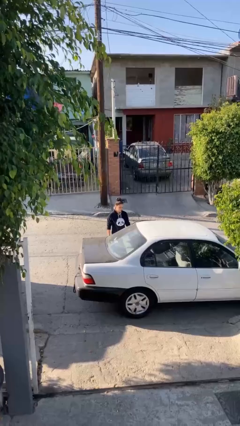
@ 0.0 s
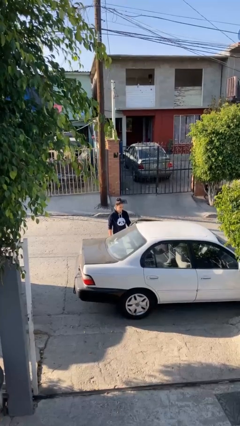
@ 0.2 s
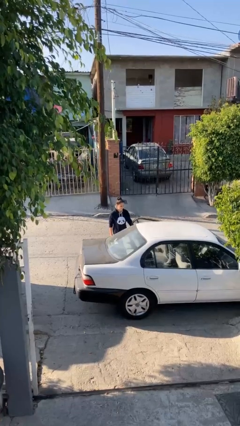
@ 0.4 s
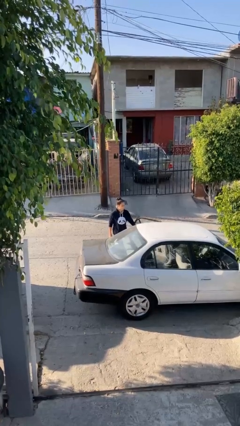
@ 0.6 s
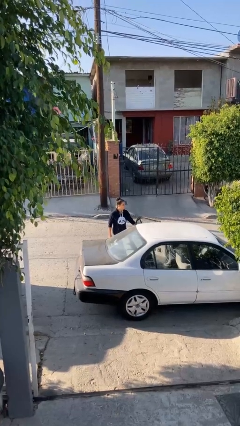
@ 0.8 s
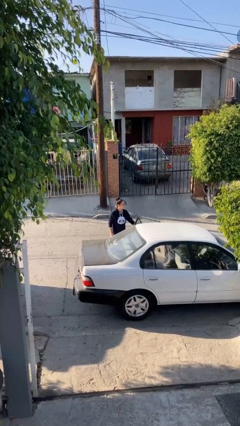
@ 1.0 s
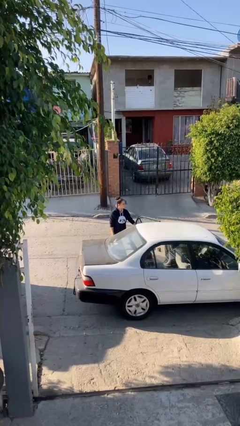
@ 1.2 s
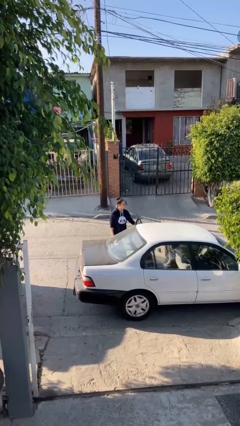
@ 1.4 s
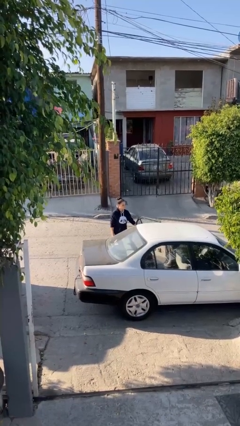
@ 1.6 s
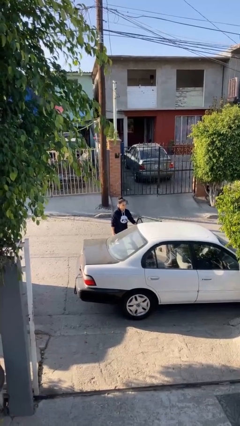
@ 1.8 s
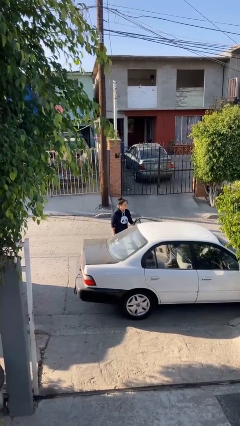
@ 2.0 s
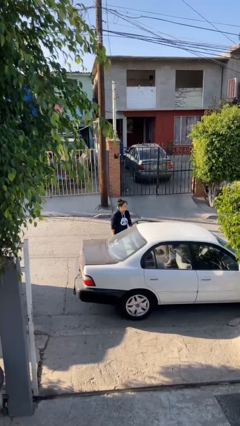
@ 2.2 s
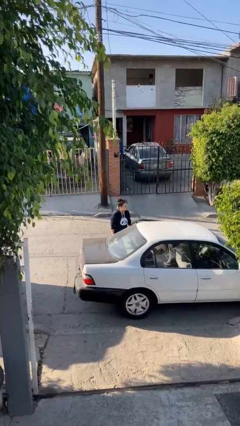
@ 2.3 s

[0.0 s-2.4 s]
person opens car door

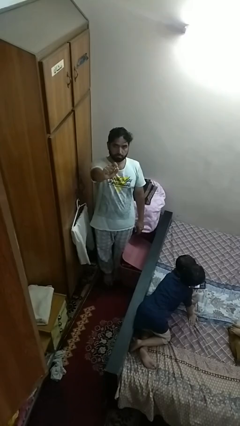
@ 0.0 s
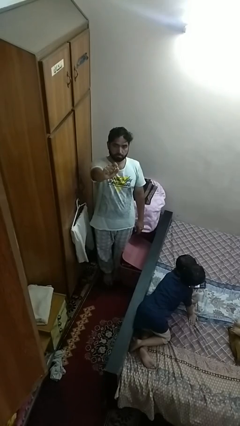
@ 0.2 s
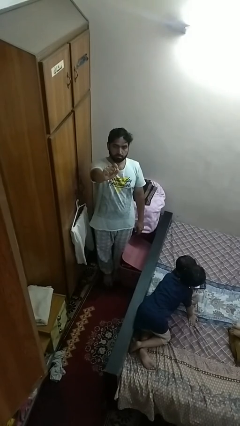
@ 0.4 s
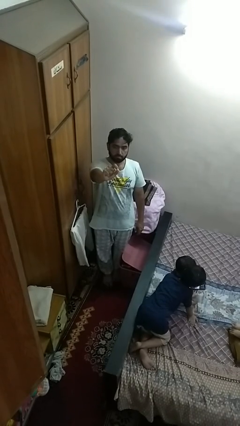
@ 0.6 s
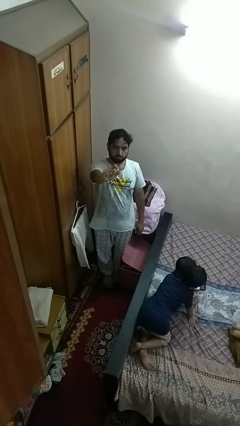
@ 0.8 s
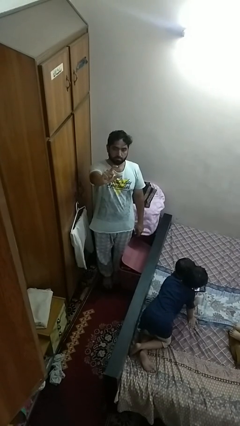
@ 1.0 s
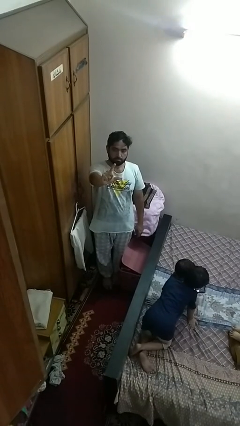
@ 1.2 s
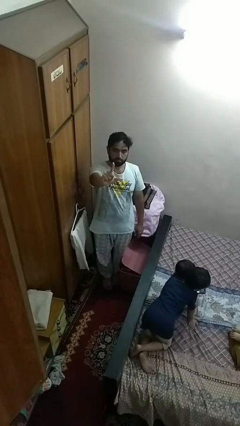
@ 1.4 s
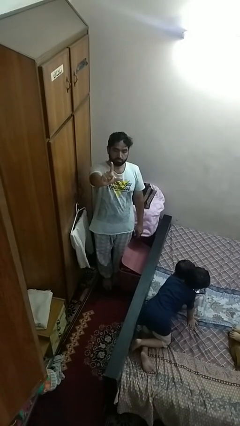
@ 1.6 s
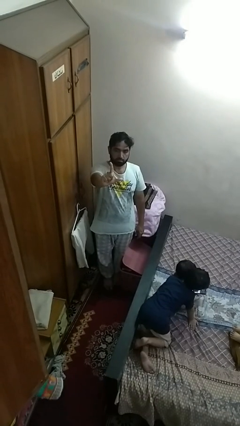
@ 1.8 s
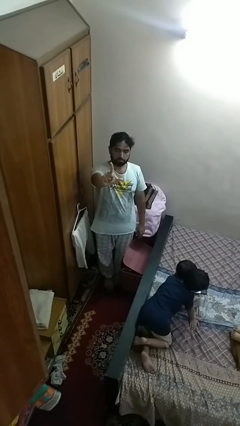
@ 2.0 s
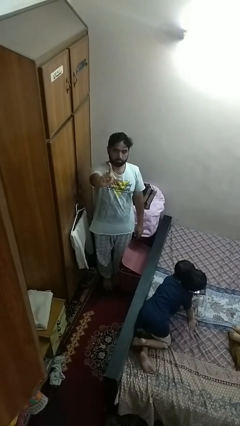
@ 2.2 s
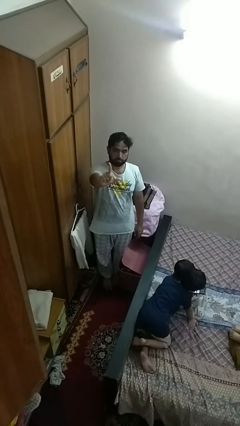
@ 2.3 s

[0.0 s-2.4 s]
person gestures zoom out

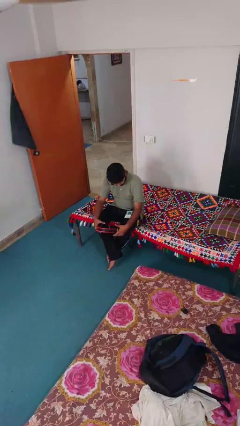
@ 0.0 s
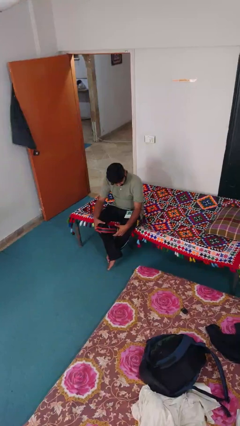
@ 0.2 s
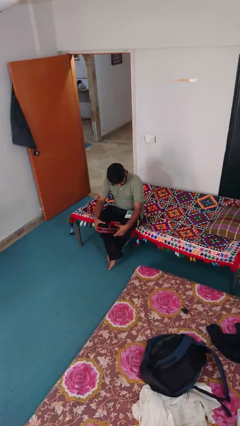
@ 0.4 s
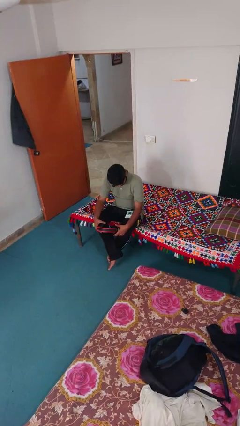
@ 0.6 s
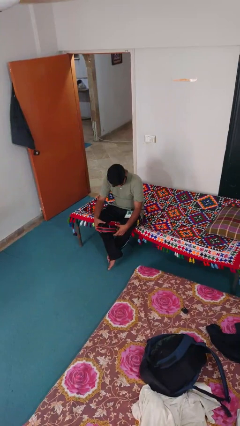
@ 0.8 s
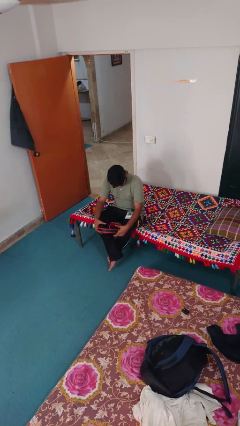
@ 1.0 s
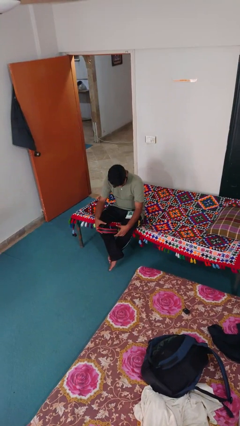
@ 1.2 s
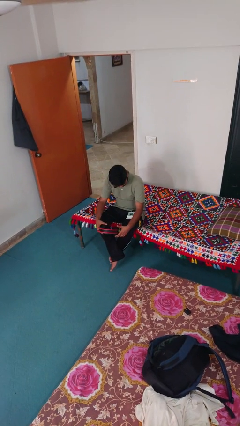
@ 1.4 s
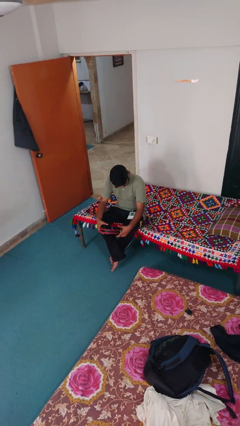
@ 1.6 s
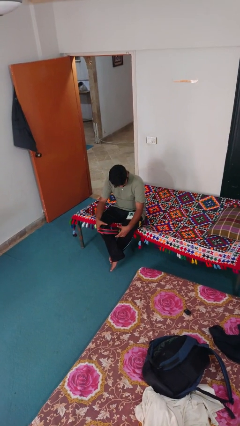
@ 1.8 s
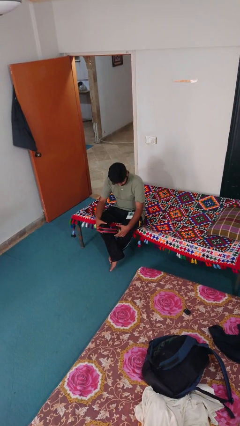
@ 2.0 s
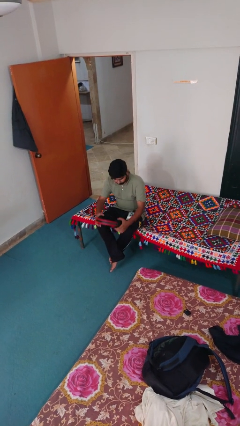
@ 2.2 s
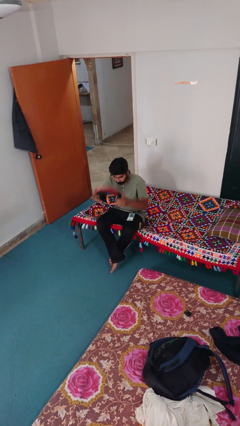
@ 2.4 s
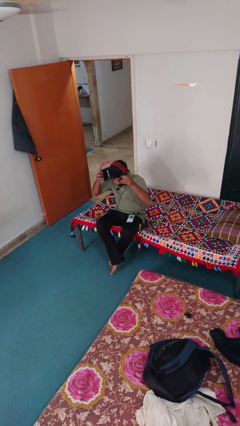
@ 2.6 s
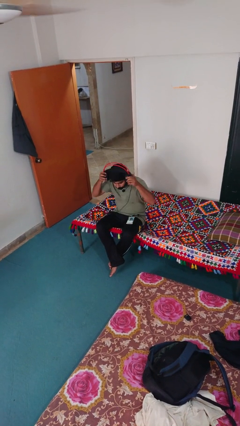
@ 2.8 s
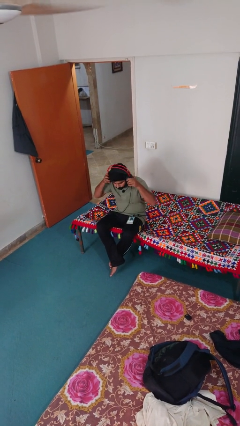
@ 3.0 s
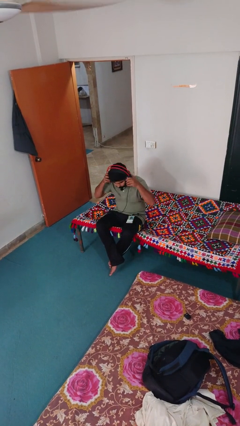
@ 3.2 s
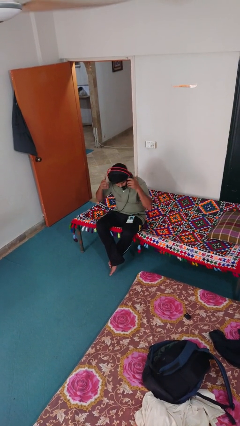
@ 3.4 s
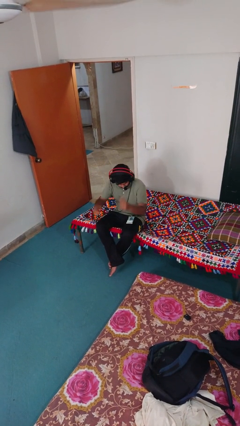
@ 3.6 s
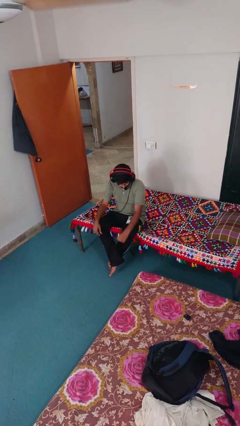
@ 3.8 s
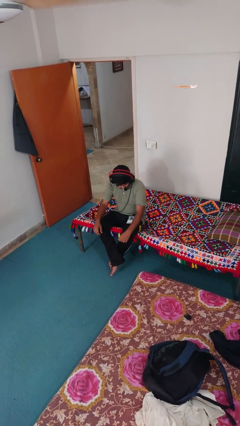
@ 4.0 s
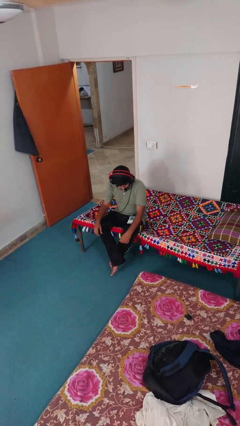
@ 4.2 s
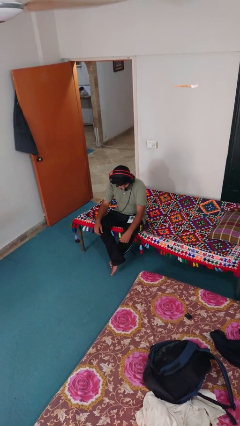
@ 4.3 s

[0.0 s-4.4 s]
person puts on headphones

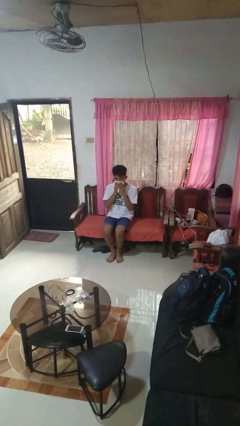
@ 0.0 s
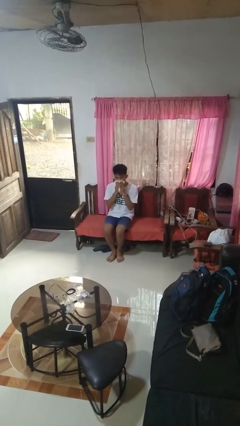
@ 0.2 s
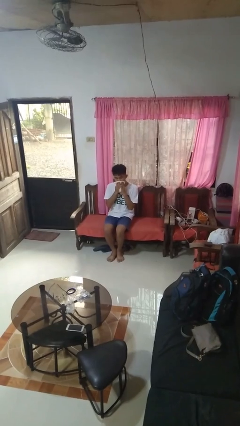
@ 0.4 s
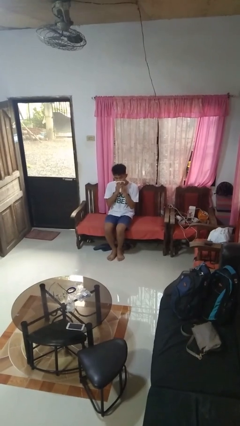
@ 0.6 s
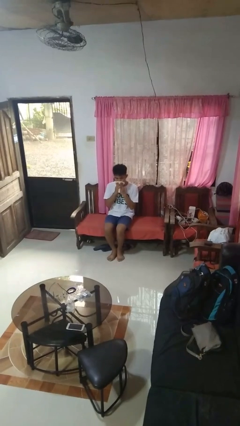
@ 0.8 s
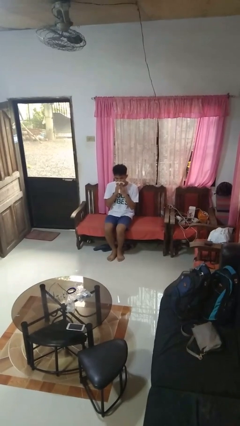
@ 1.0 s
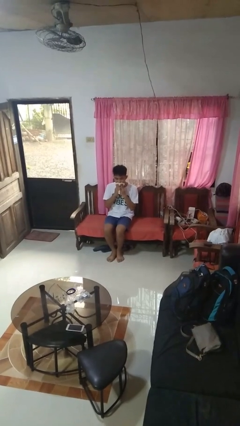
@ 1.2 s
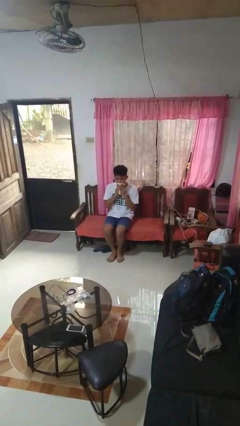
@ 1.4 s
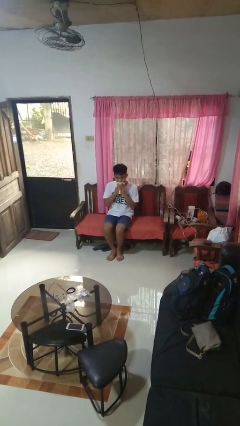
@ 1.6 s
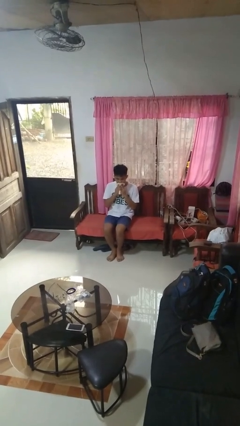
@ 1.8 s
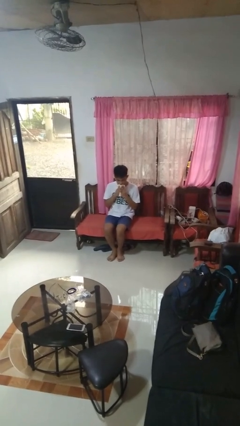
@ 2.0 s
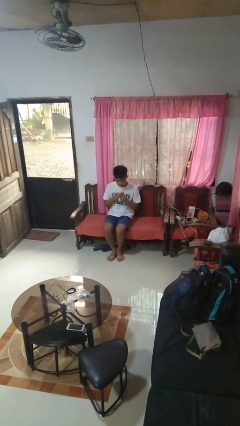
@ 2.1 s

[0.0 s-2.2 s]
person wipes mouth with napkin

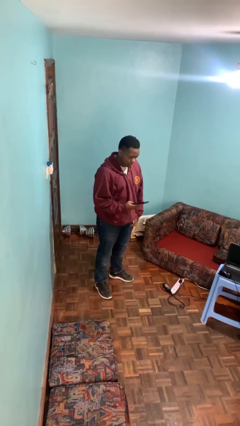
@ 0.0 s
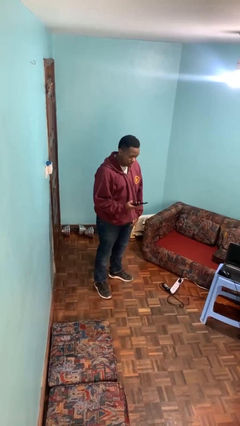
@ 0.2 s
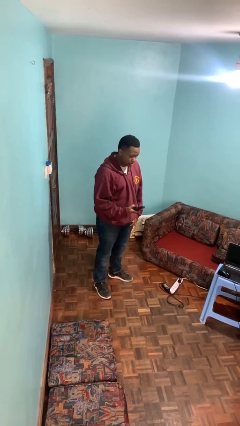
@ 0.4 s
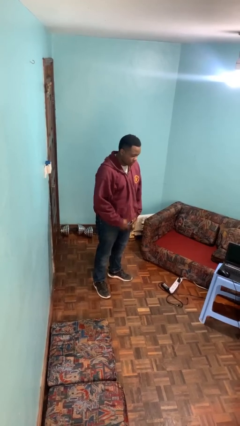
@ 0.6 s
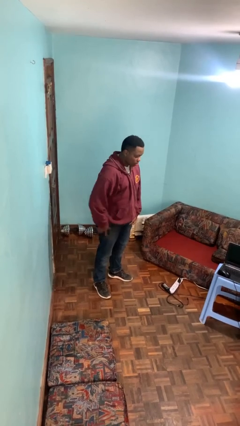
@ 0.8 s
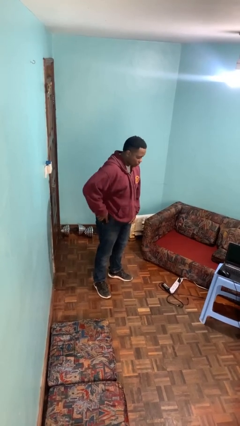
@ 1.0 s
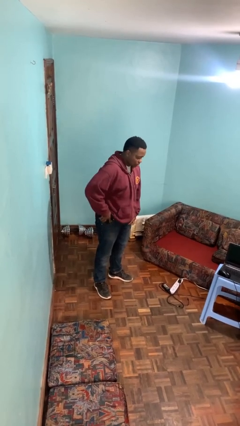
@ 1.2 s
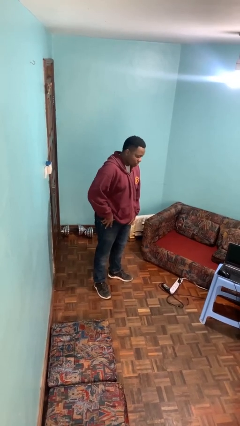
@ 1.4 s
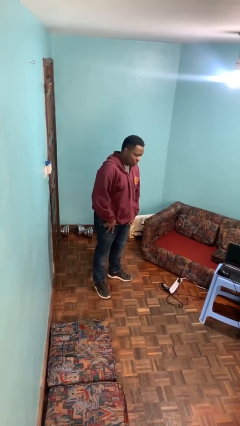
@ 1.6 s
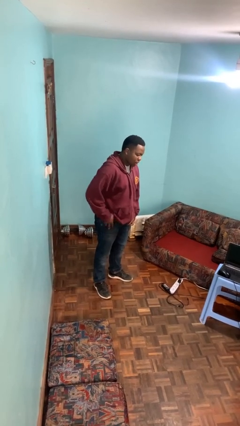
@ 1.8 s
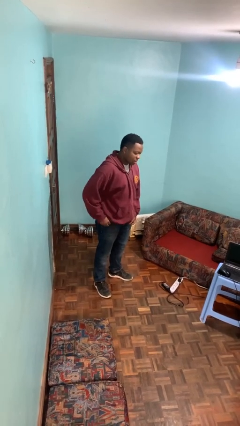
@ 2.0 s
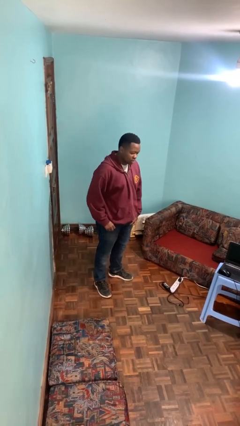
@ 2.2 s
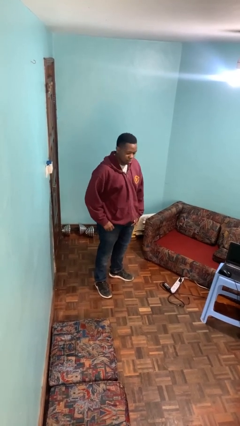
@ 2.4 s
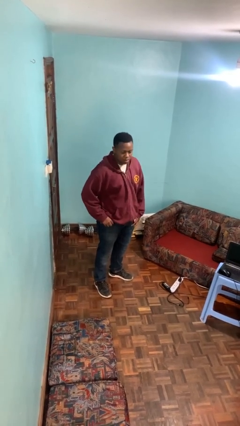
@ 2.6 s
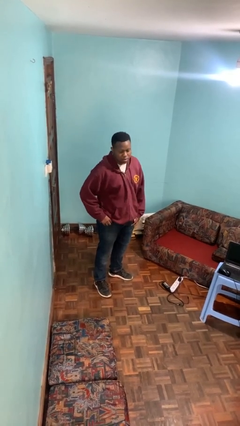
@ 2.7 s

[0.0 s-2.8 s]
person puts phone into pocket

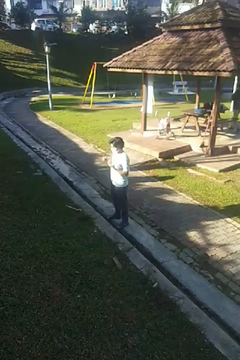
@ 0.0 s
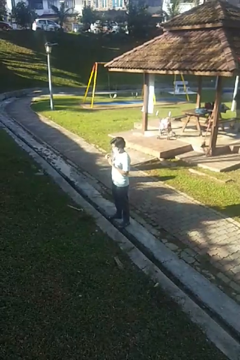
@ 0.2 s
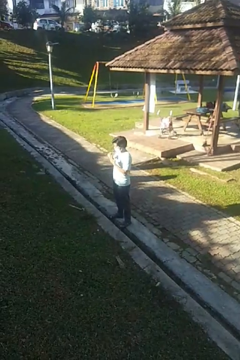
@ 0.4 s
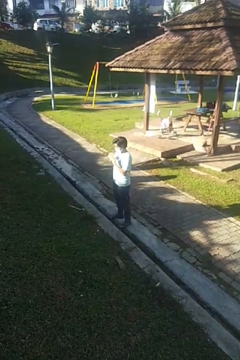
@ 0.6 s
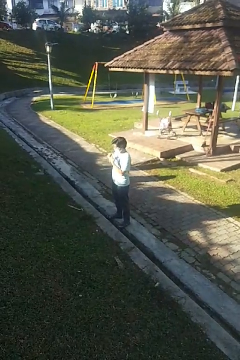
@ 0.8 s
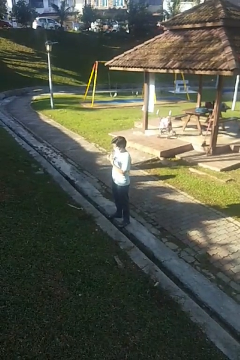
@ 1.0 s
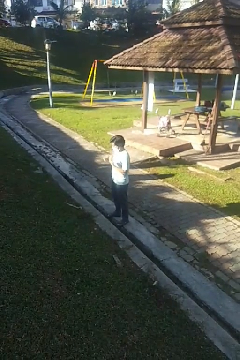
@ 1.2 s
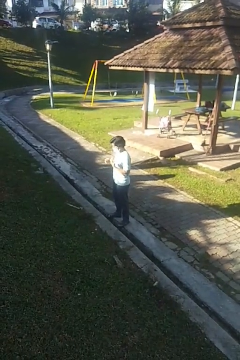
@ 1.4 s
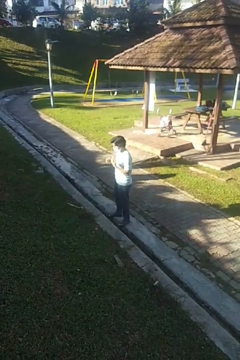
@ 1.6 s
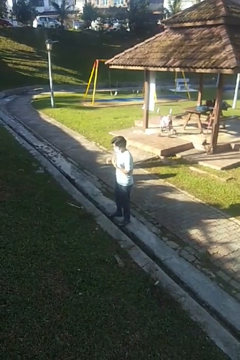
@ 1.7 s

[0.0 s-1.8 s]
person puts on ring

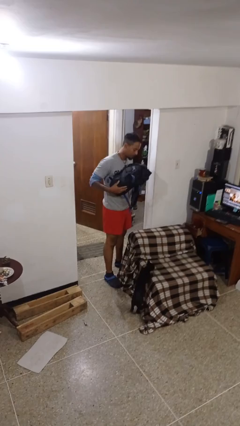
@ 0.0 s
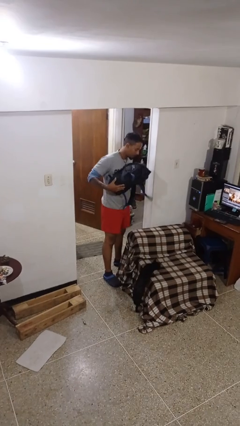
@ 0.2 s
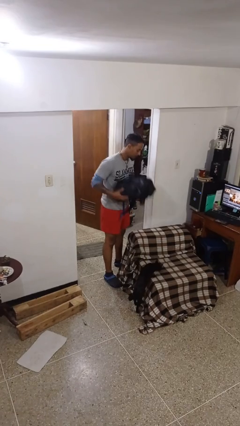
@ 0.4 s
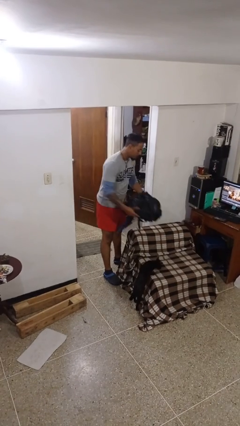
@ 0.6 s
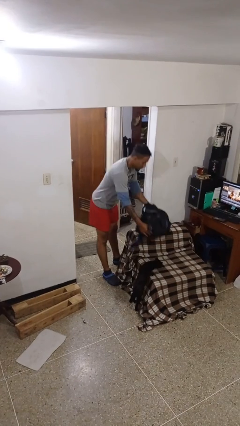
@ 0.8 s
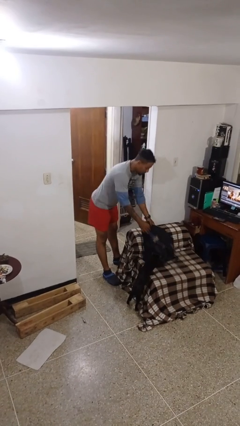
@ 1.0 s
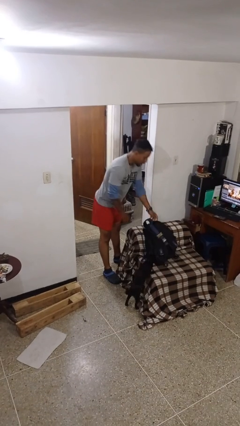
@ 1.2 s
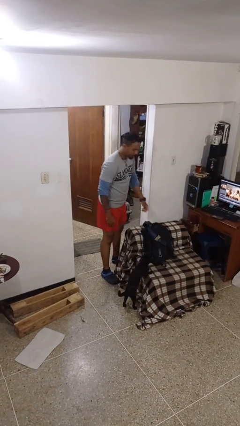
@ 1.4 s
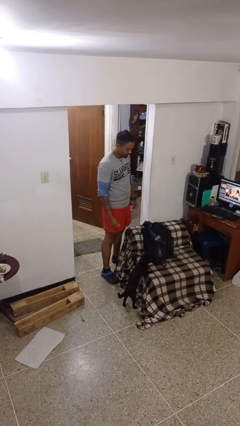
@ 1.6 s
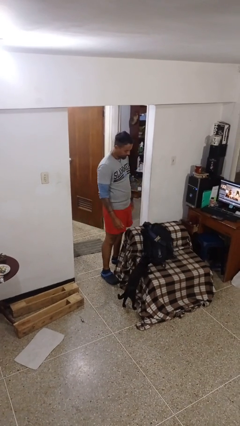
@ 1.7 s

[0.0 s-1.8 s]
person puts down object on couch
